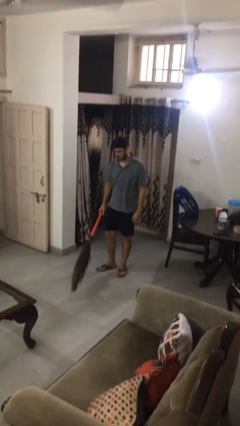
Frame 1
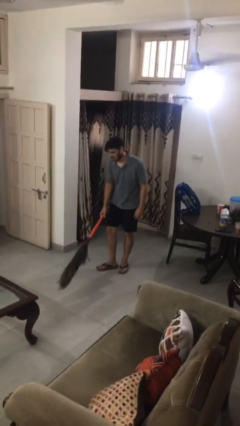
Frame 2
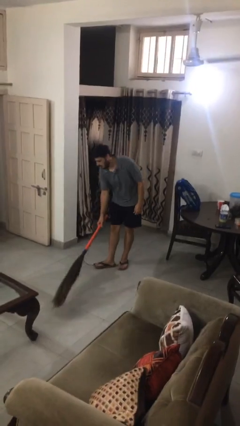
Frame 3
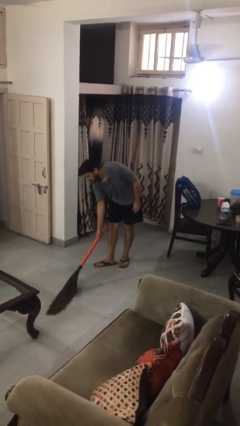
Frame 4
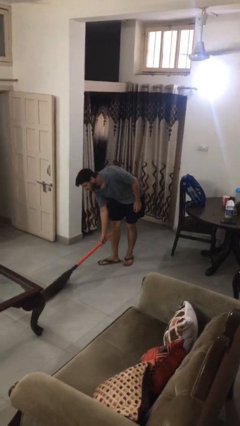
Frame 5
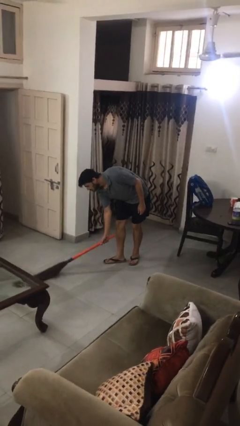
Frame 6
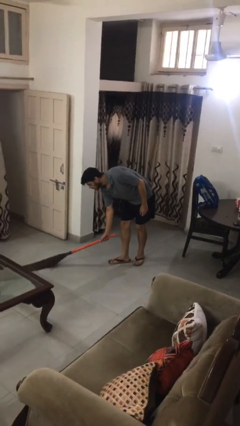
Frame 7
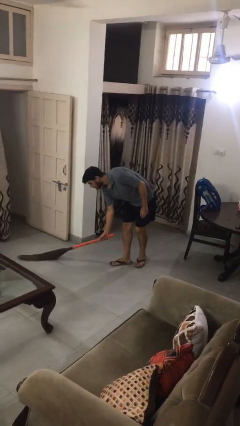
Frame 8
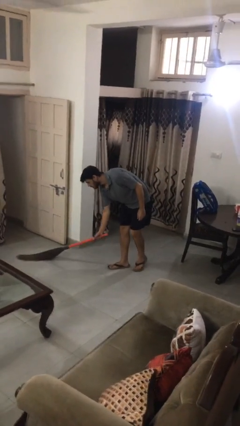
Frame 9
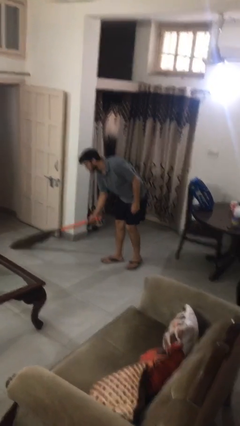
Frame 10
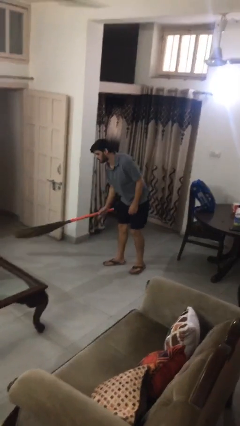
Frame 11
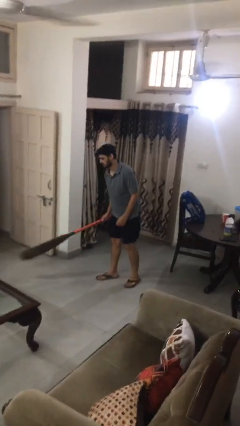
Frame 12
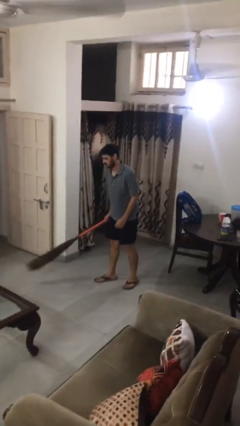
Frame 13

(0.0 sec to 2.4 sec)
person sweeps floor

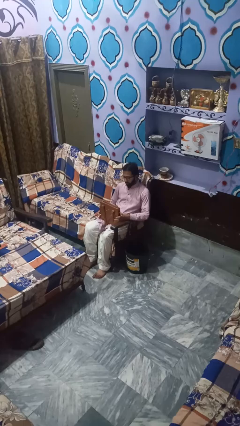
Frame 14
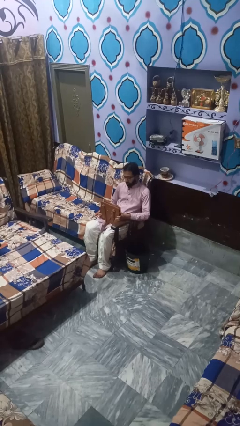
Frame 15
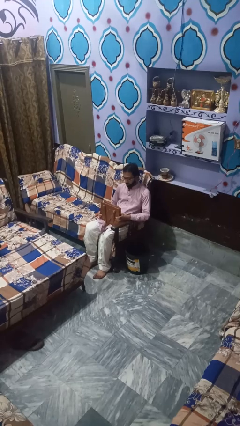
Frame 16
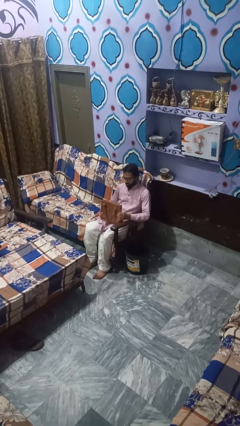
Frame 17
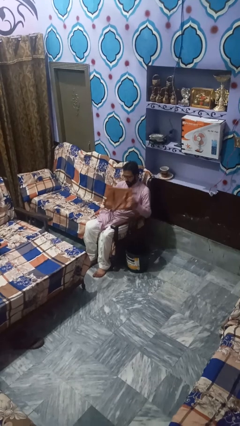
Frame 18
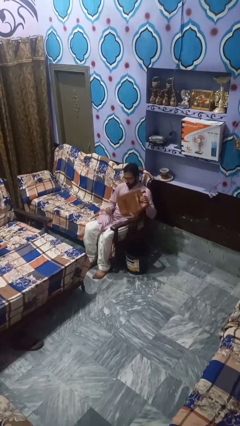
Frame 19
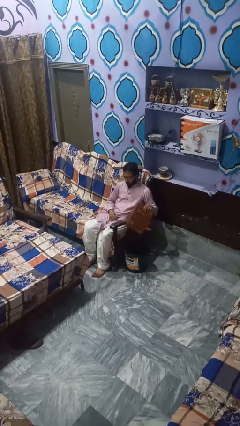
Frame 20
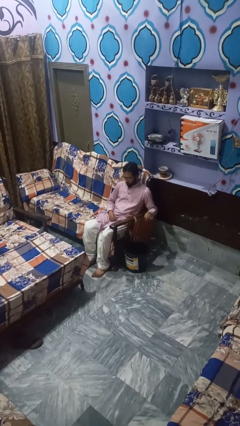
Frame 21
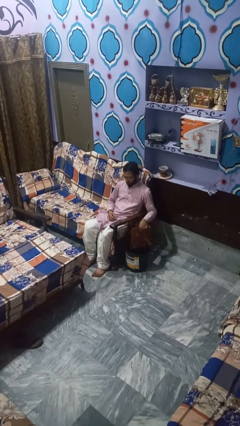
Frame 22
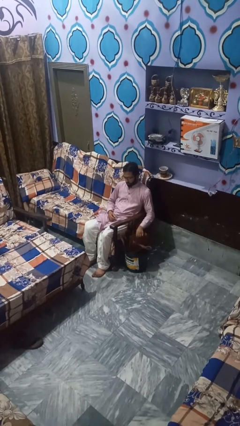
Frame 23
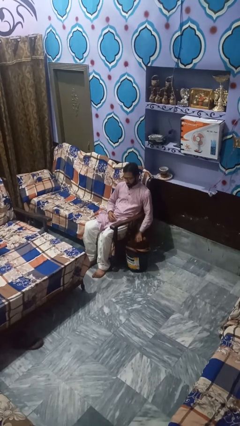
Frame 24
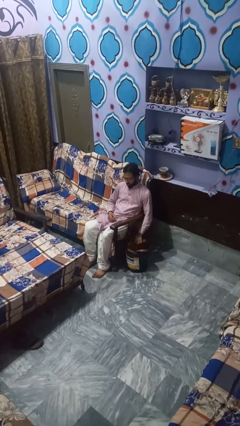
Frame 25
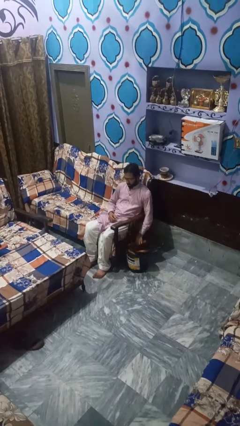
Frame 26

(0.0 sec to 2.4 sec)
person puts object into basket

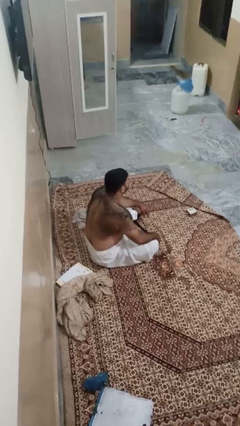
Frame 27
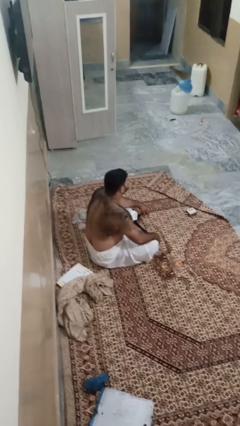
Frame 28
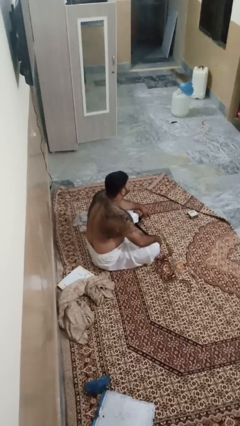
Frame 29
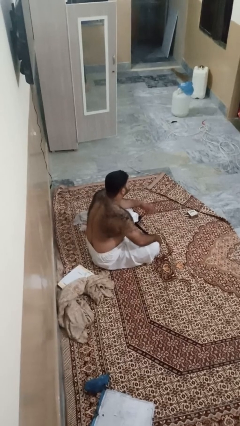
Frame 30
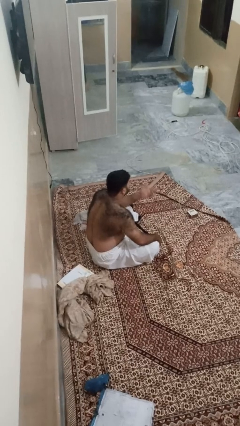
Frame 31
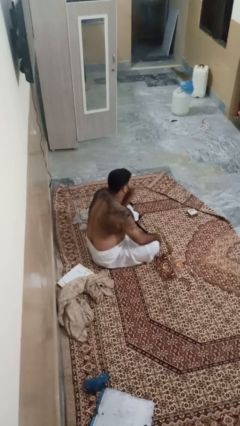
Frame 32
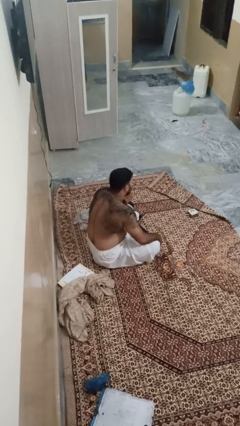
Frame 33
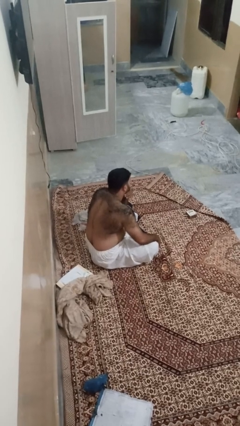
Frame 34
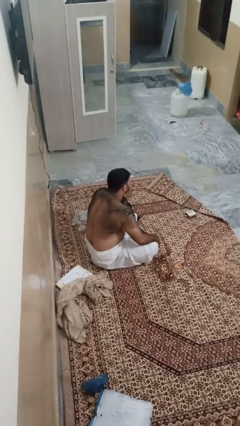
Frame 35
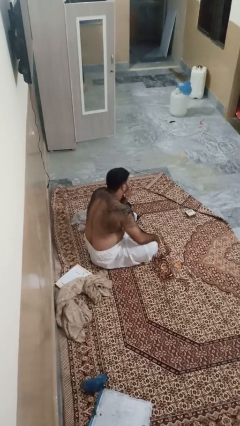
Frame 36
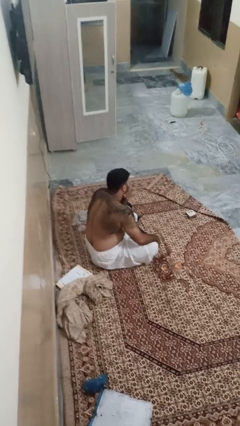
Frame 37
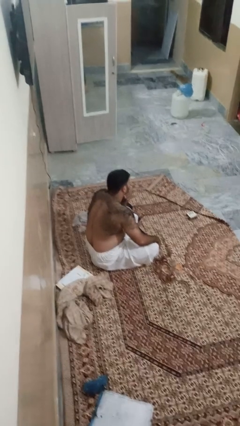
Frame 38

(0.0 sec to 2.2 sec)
person strokes chin

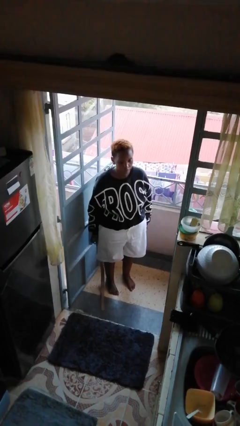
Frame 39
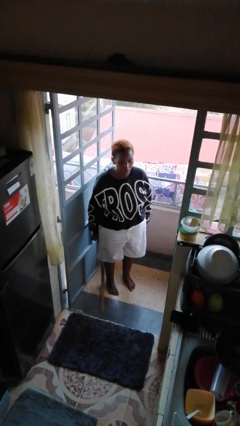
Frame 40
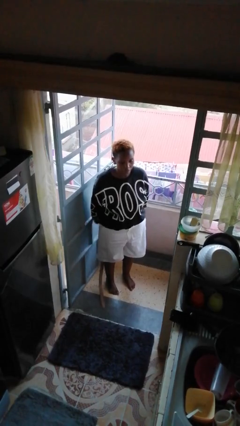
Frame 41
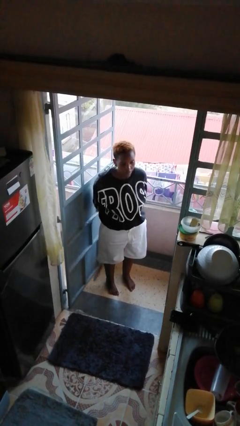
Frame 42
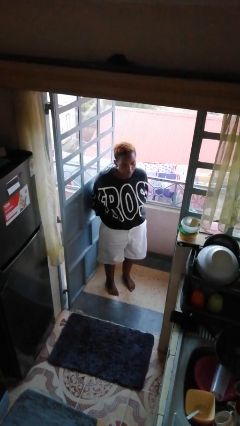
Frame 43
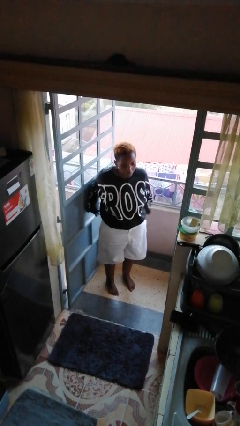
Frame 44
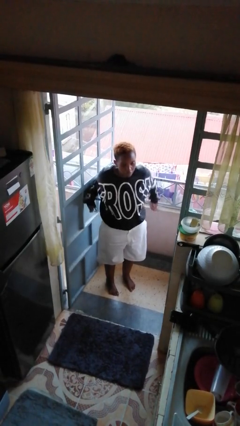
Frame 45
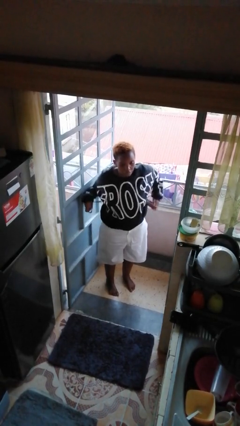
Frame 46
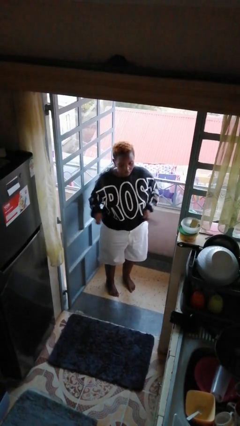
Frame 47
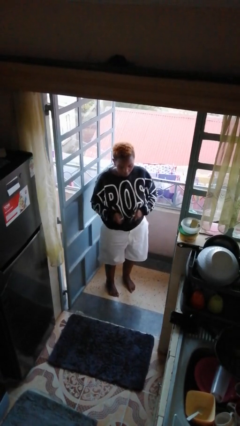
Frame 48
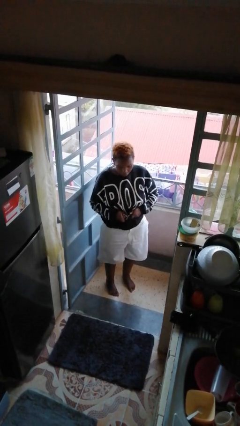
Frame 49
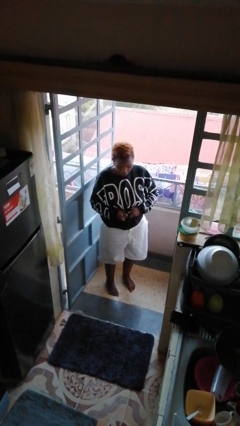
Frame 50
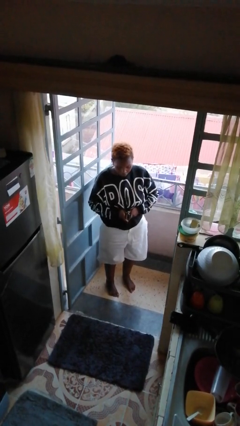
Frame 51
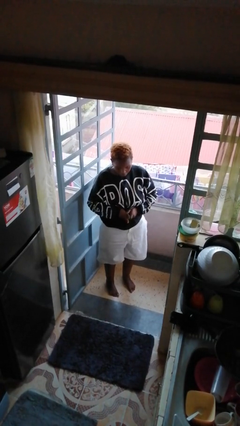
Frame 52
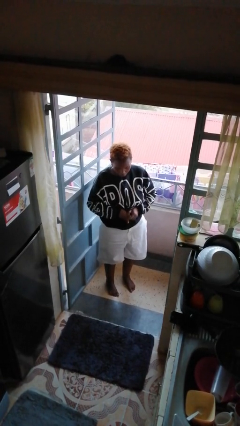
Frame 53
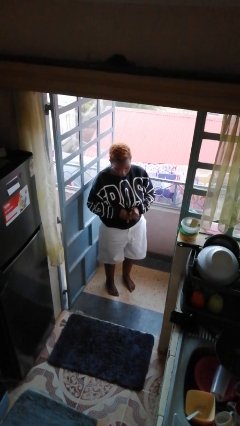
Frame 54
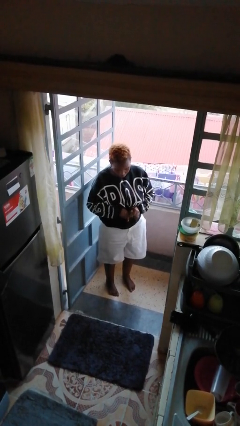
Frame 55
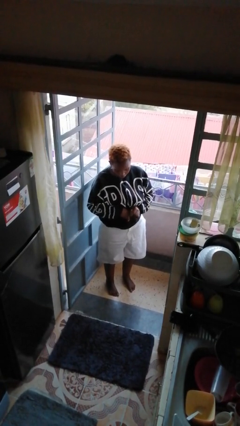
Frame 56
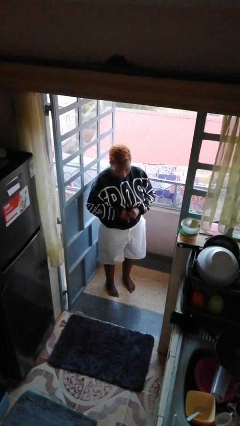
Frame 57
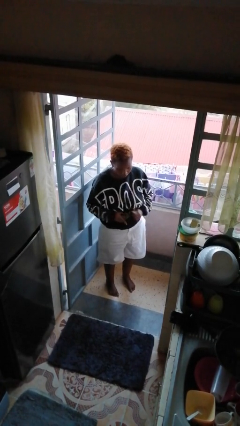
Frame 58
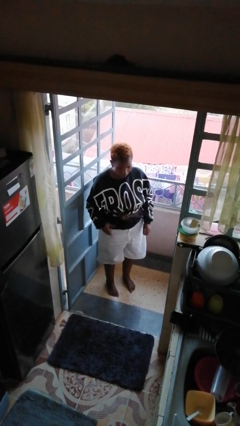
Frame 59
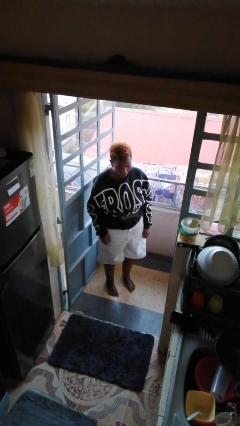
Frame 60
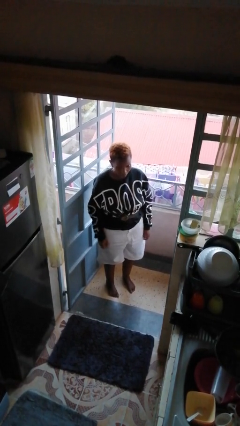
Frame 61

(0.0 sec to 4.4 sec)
person puts on belt

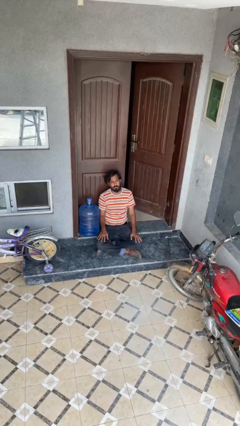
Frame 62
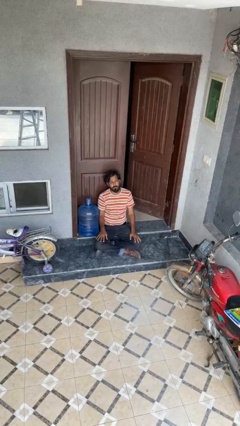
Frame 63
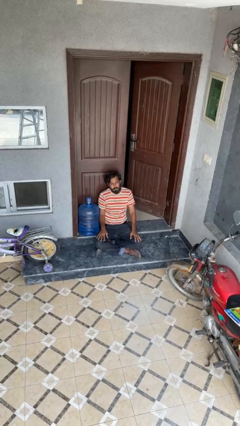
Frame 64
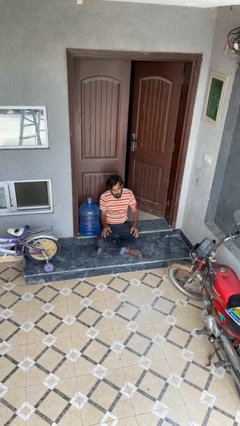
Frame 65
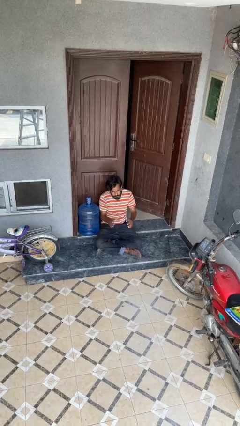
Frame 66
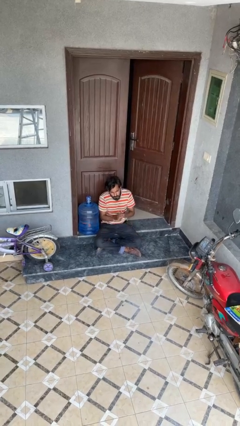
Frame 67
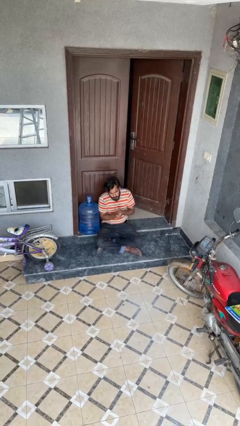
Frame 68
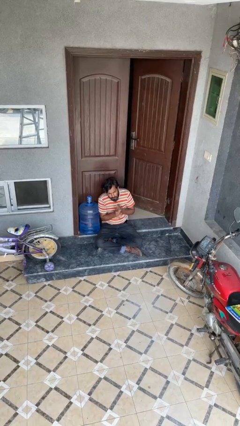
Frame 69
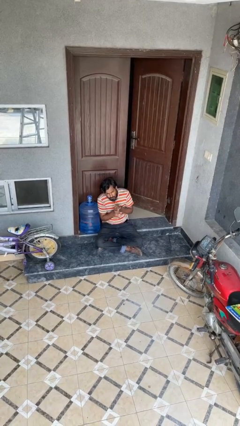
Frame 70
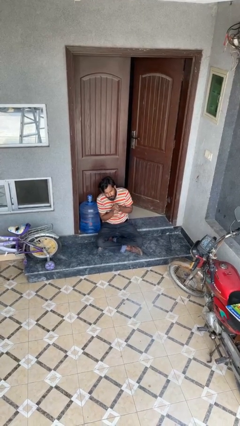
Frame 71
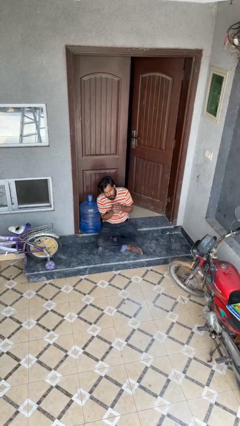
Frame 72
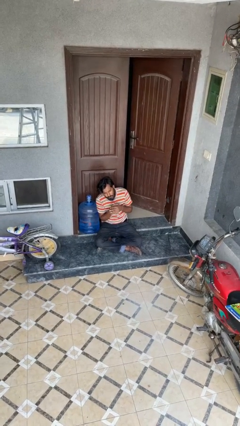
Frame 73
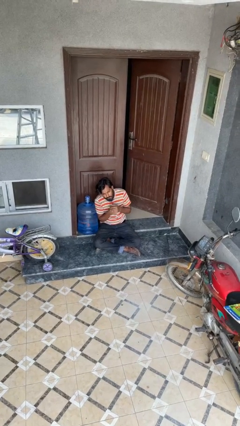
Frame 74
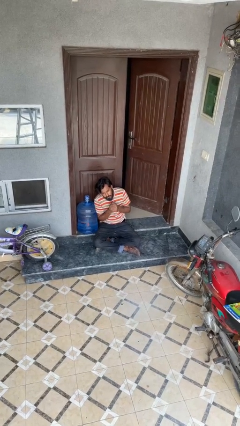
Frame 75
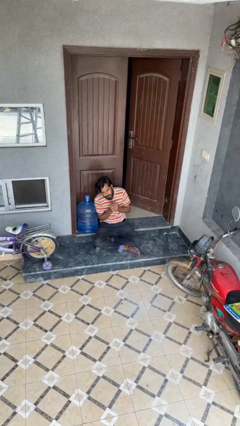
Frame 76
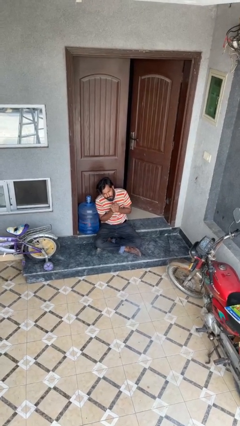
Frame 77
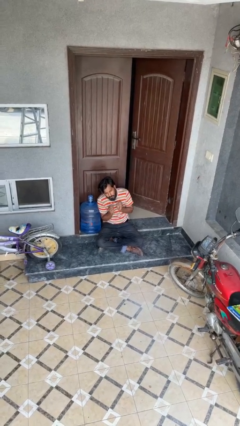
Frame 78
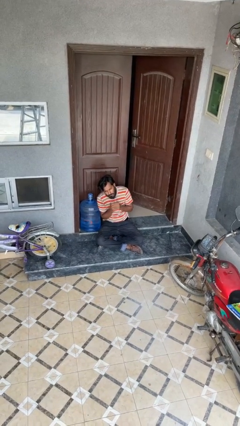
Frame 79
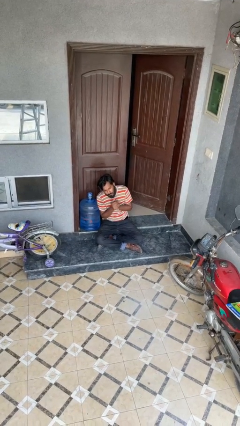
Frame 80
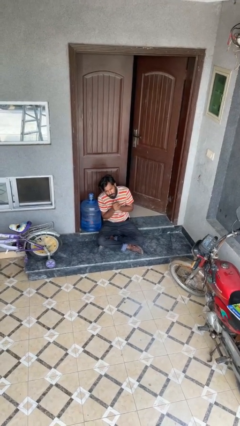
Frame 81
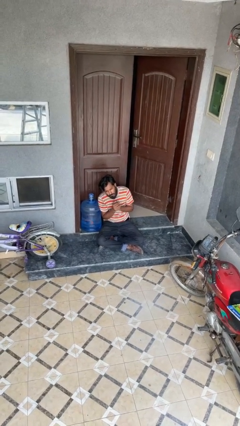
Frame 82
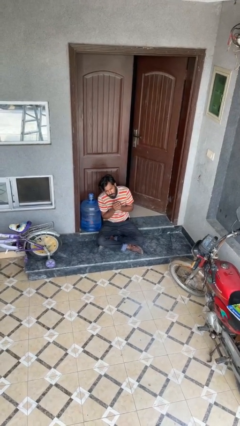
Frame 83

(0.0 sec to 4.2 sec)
person looks at hands in lap

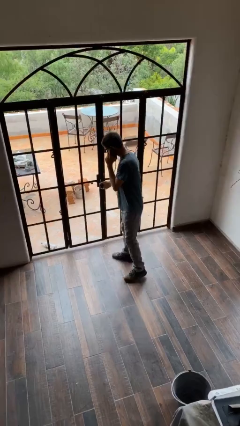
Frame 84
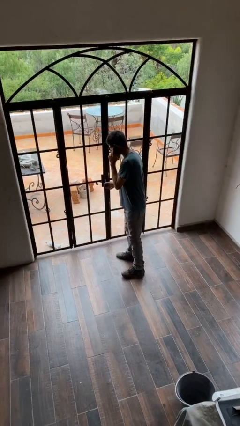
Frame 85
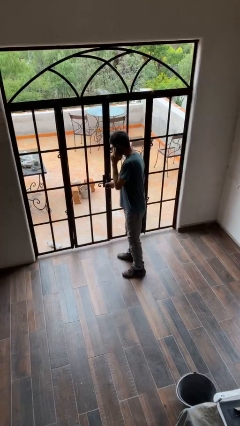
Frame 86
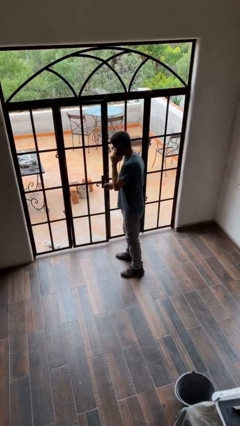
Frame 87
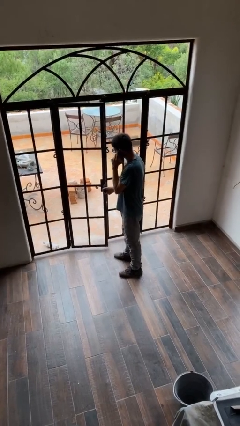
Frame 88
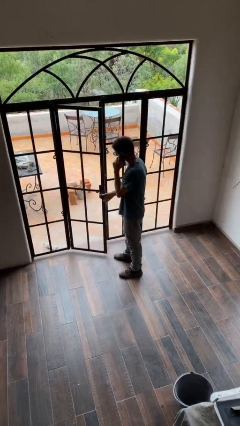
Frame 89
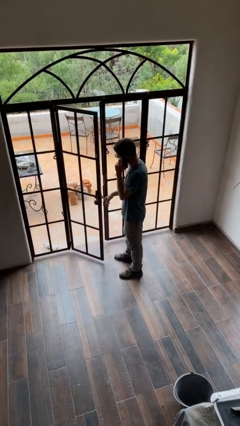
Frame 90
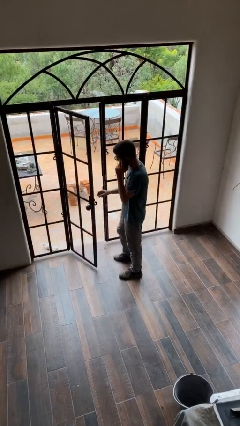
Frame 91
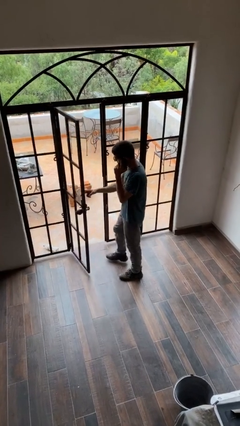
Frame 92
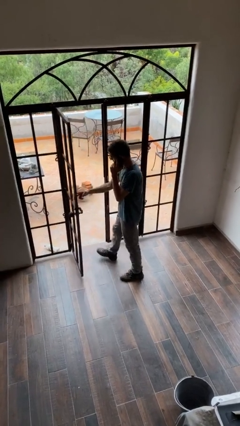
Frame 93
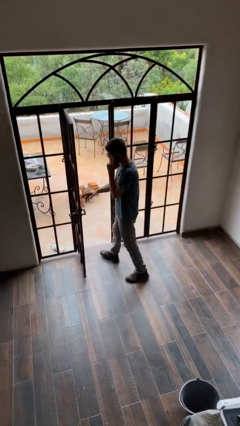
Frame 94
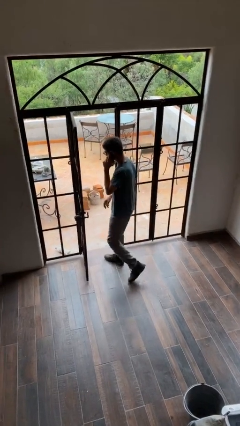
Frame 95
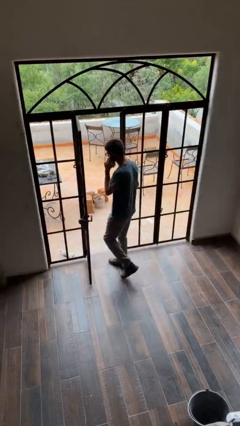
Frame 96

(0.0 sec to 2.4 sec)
person opens facility door
